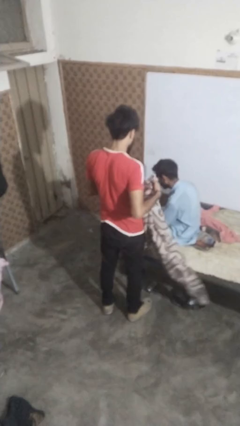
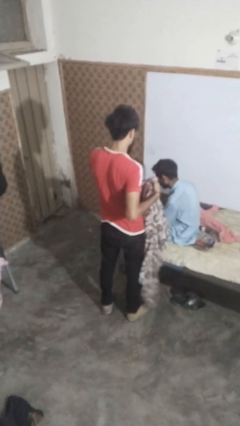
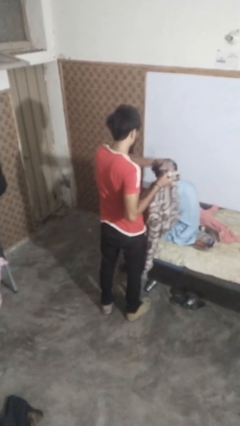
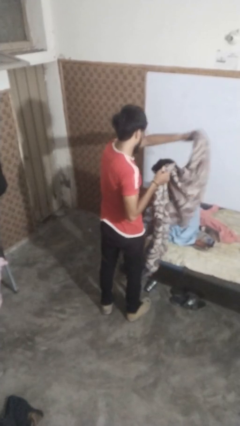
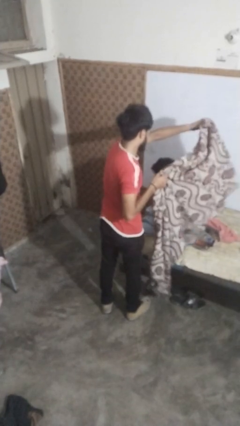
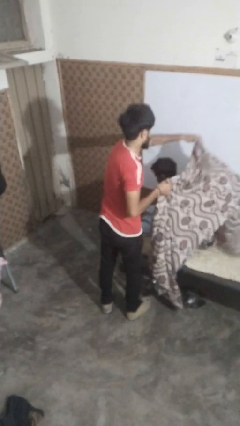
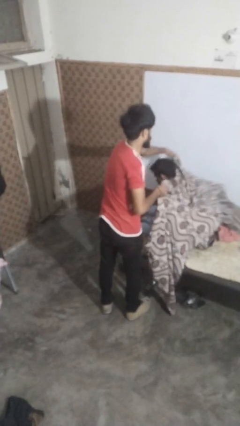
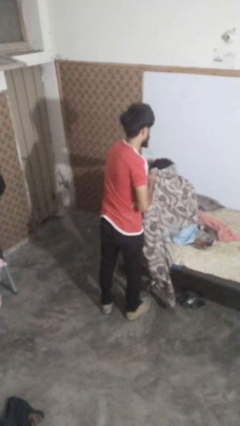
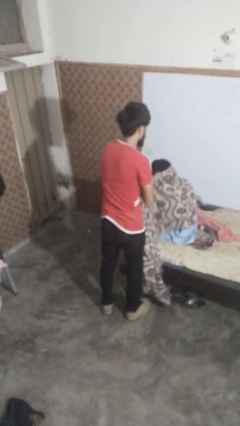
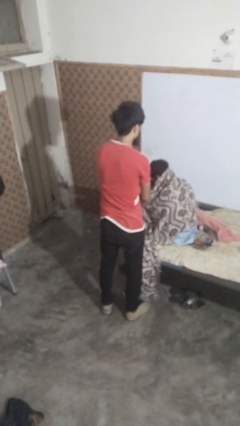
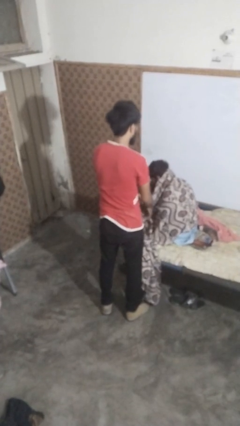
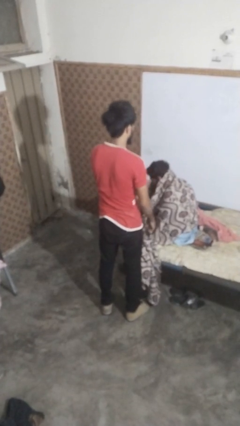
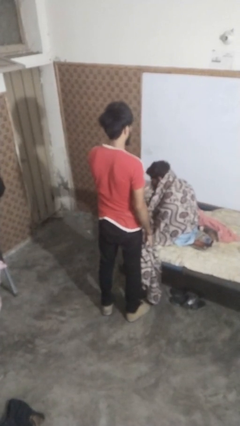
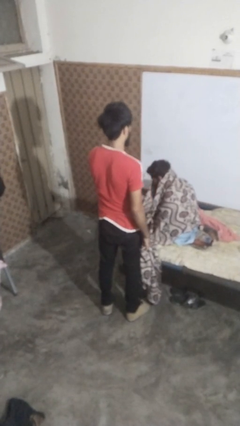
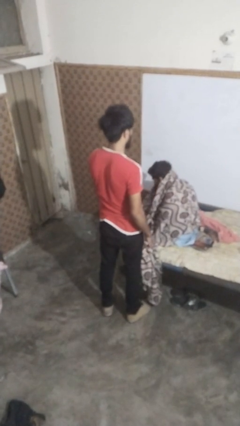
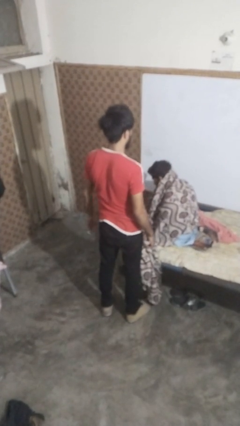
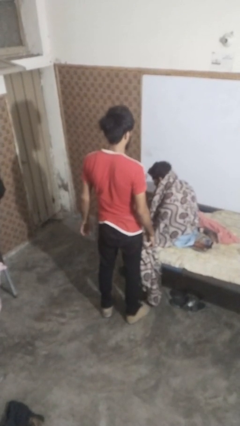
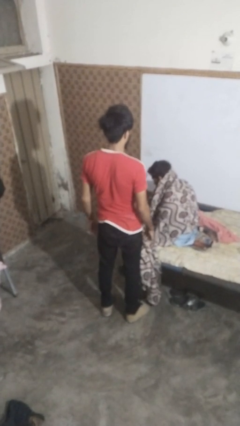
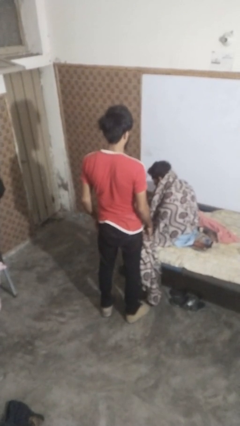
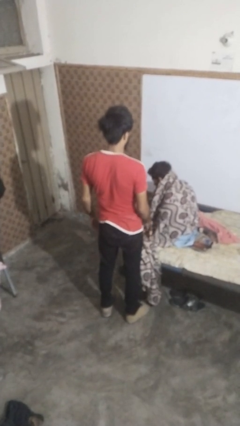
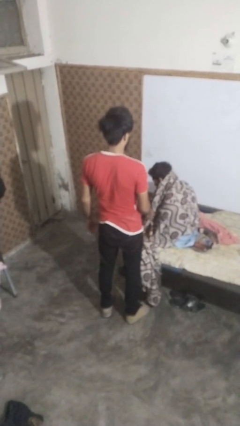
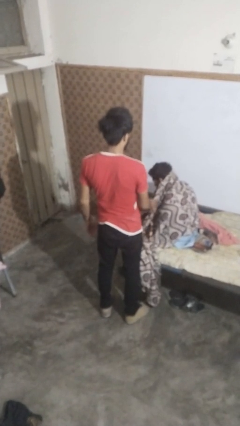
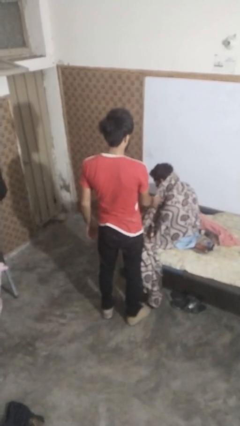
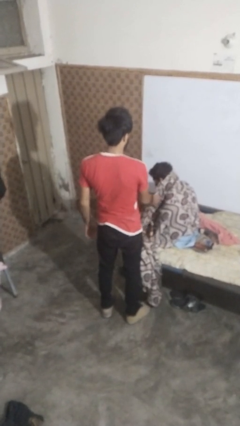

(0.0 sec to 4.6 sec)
person covers friend with blanket

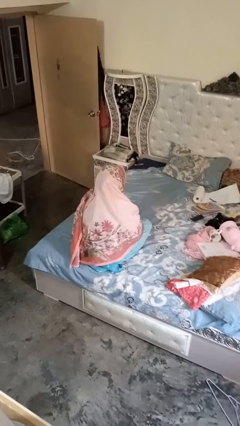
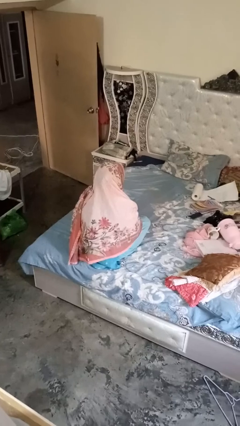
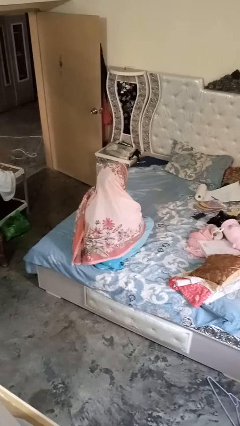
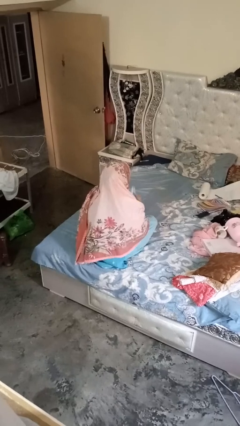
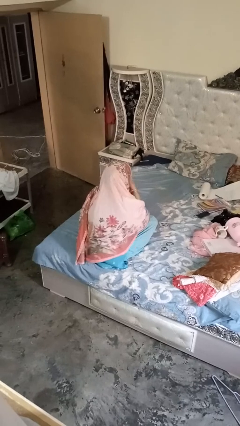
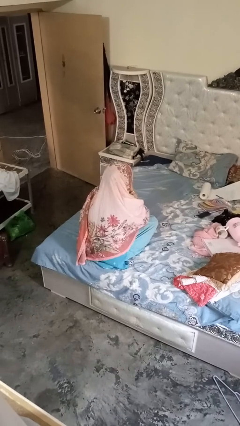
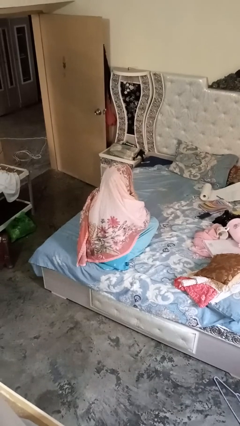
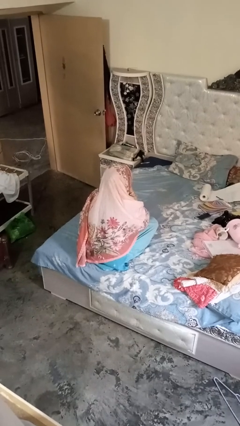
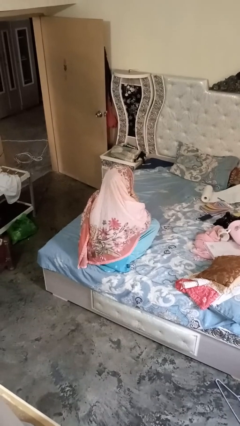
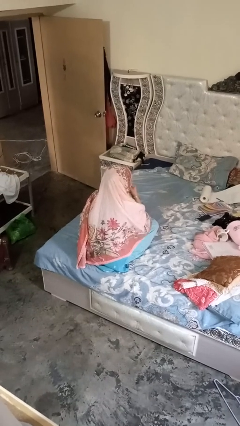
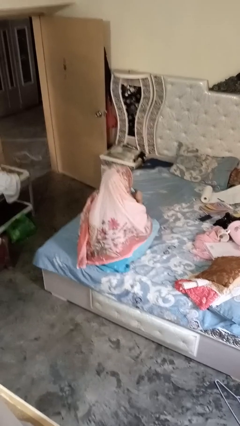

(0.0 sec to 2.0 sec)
person blows nose

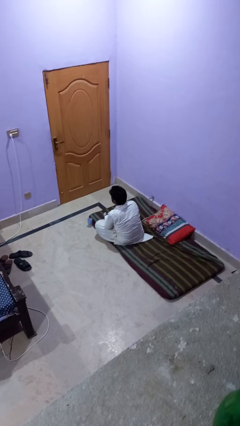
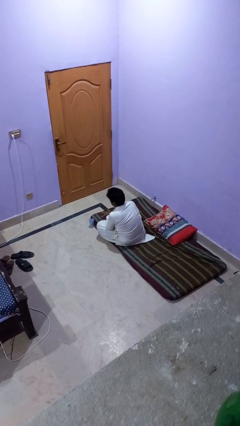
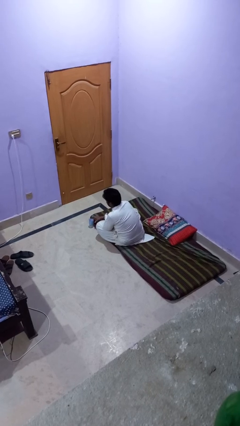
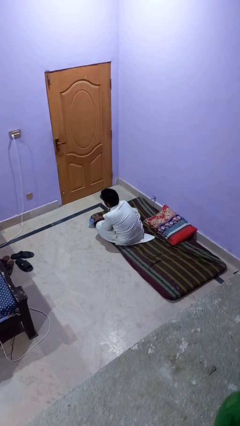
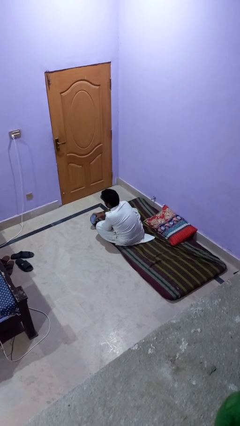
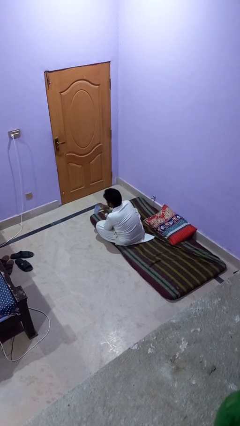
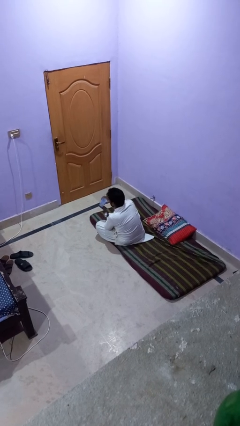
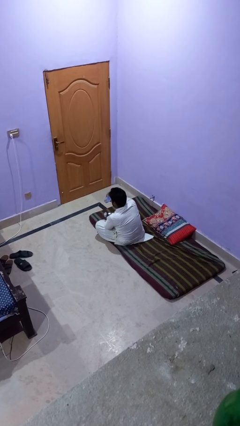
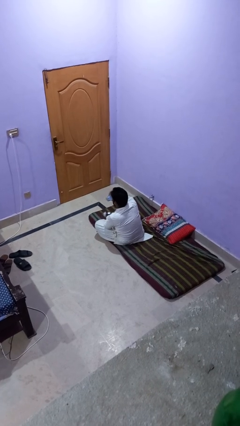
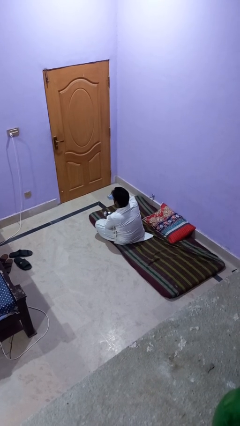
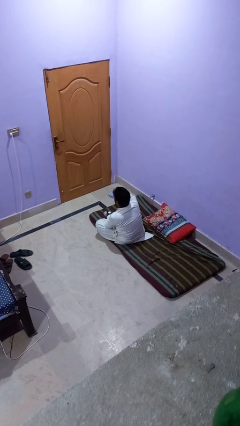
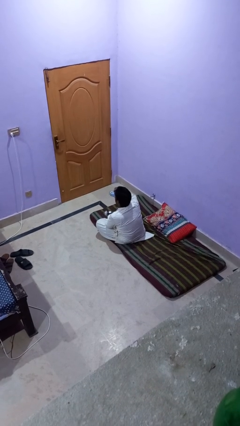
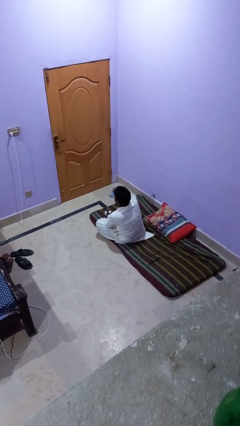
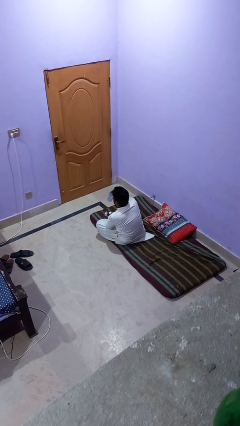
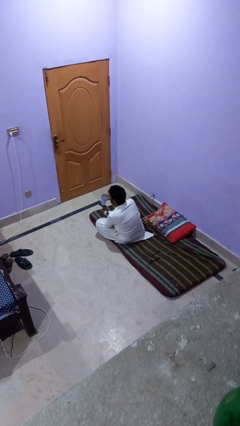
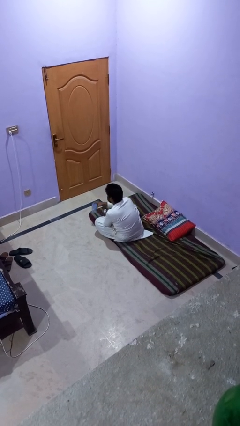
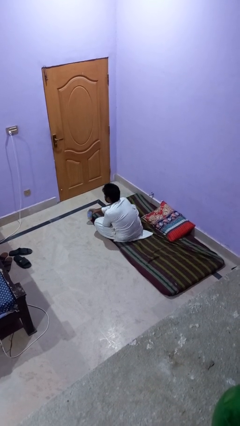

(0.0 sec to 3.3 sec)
person drinks from cup

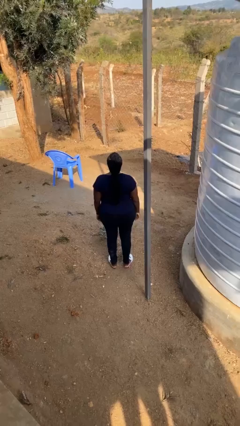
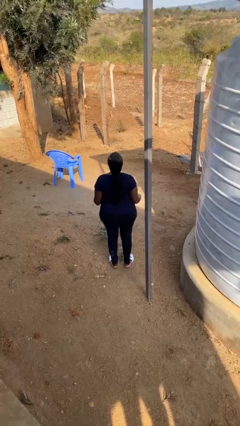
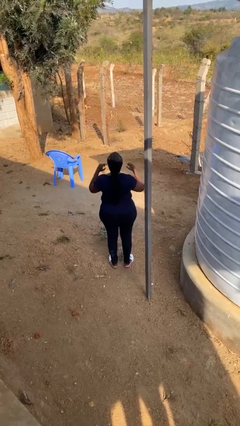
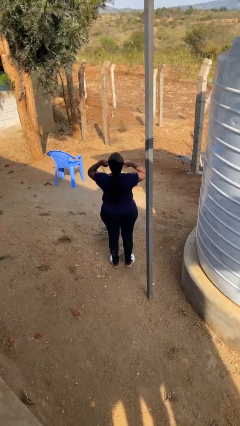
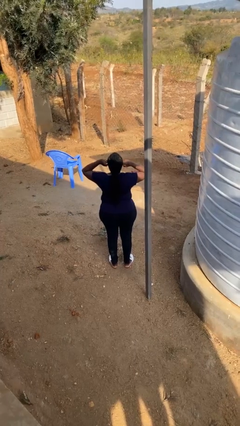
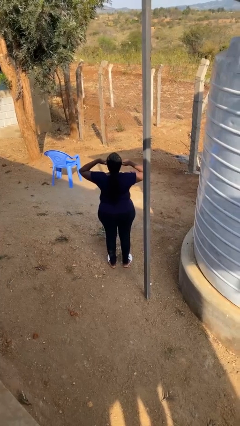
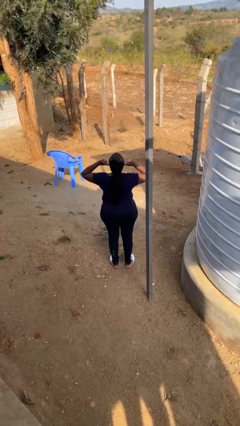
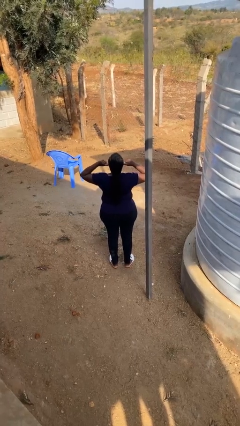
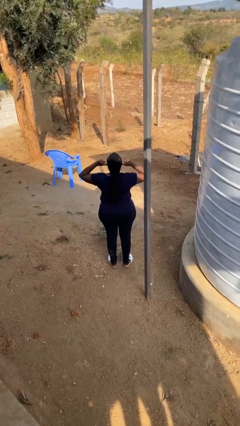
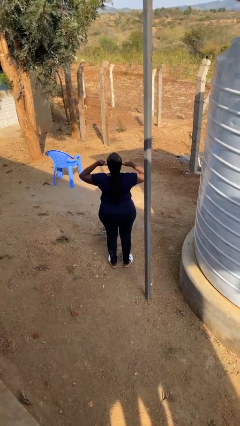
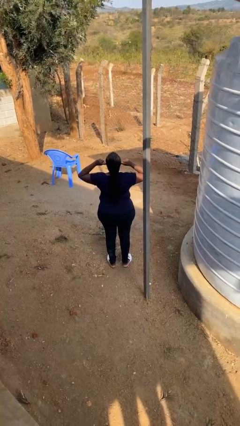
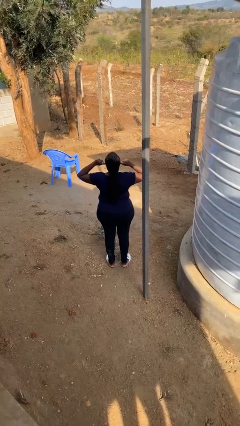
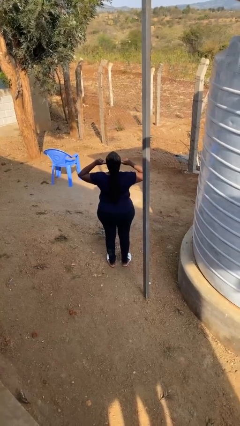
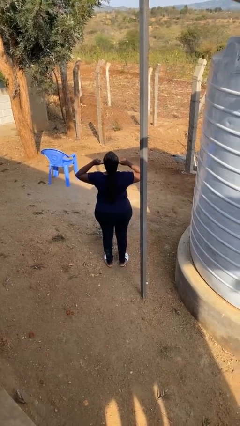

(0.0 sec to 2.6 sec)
person puts fingers in ear

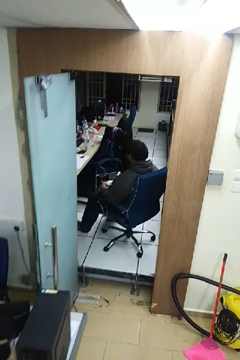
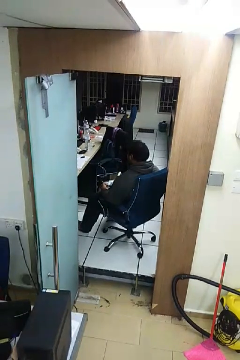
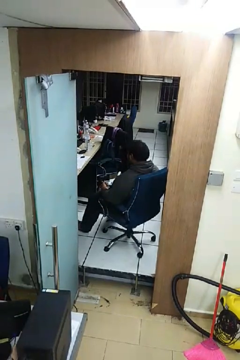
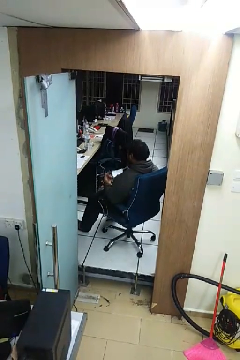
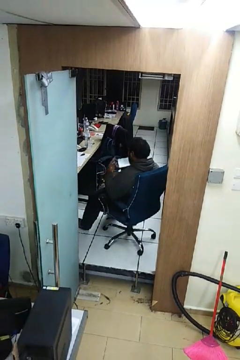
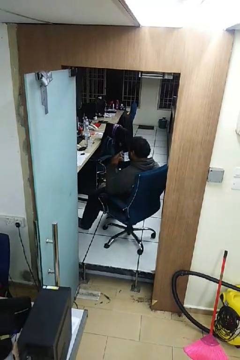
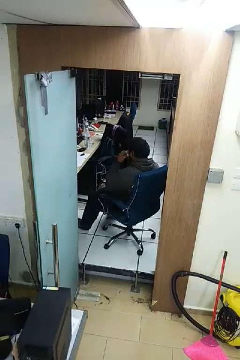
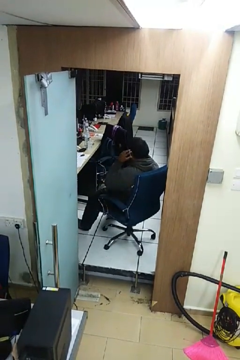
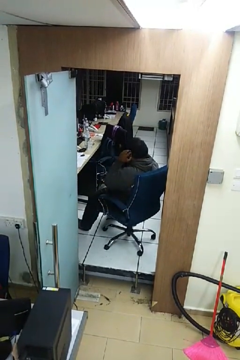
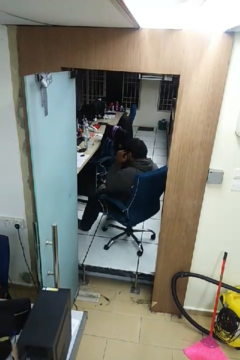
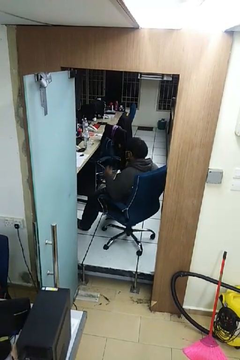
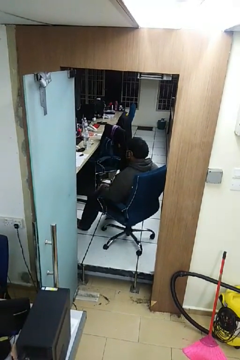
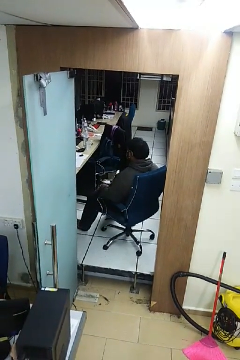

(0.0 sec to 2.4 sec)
person puts on facemask

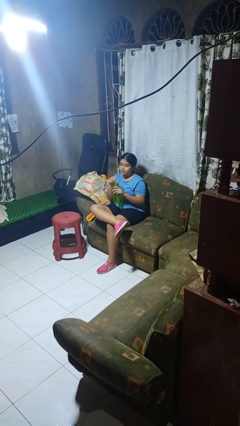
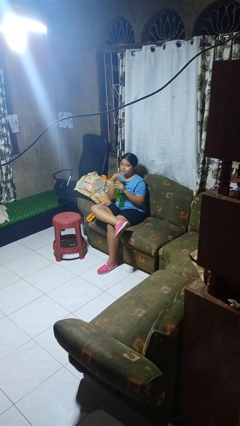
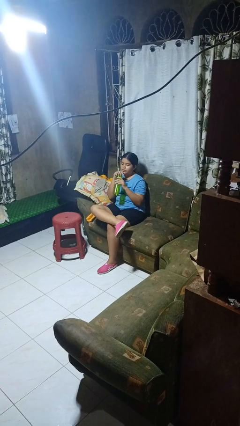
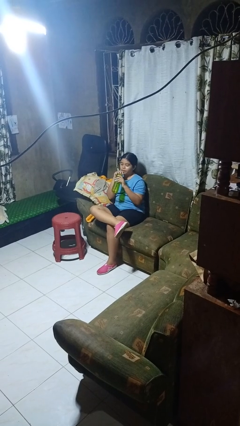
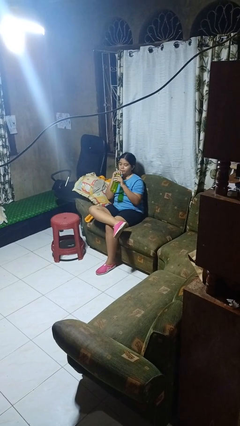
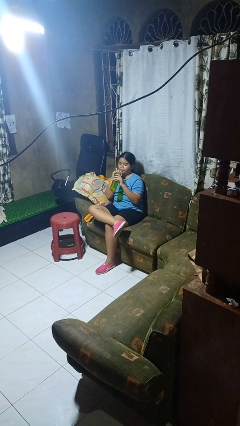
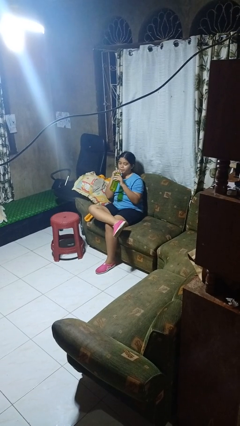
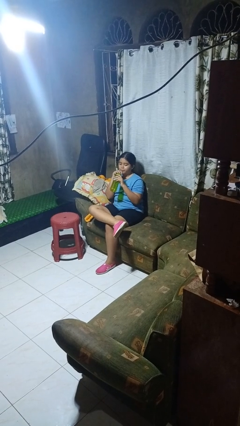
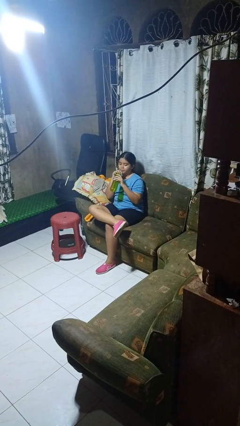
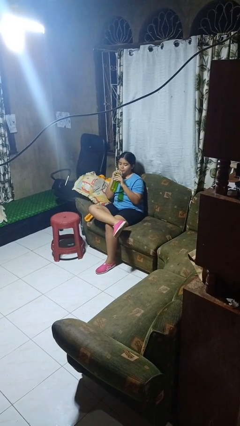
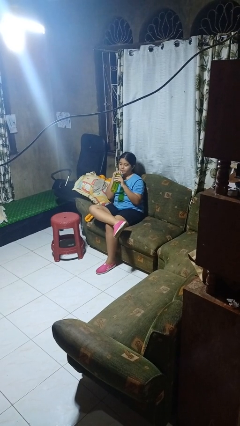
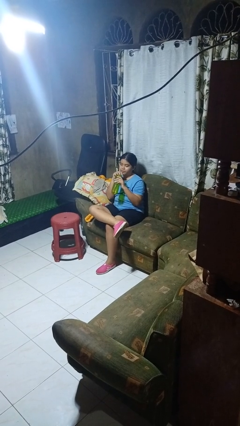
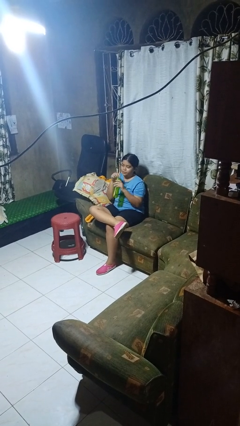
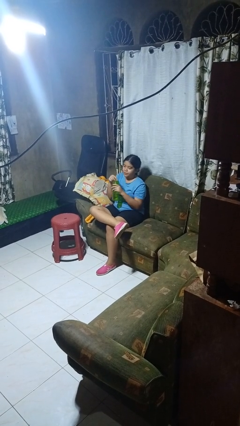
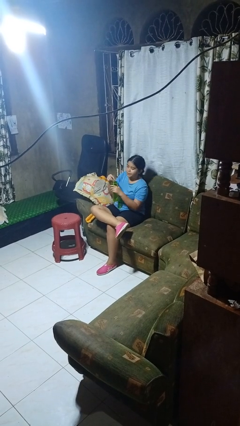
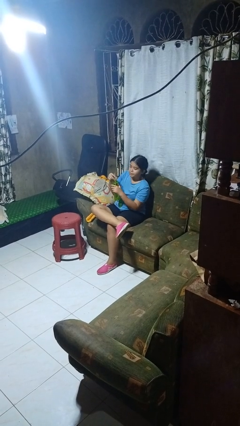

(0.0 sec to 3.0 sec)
person drinks from straw
